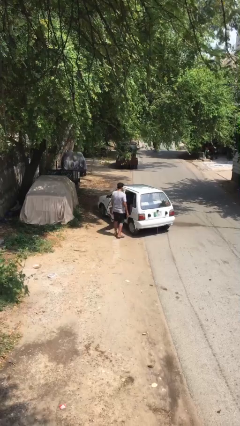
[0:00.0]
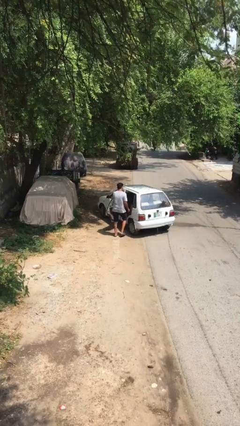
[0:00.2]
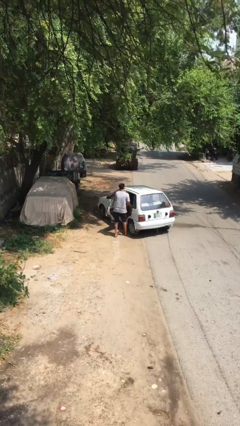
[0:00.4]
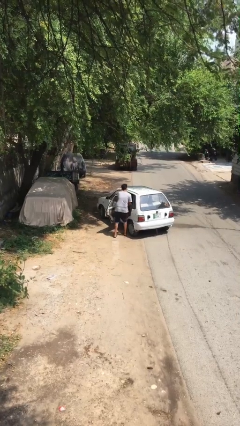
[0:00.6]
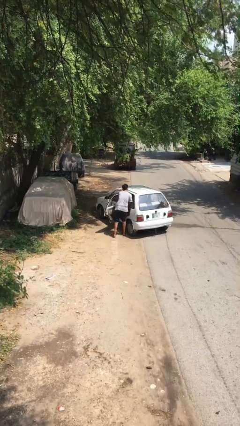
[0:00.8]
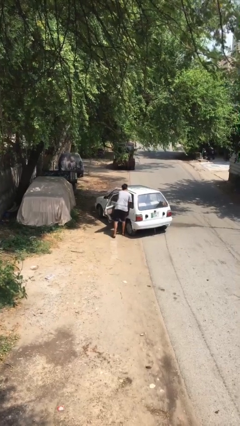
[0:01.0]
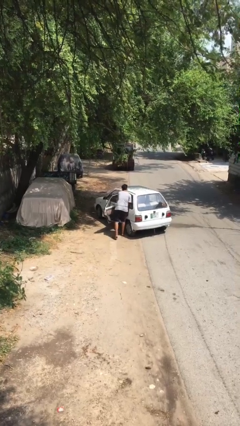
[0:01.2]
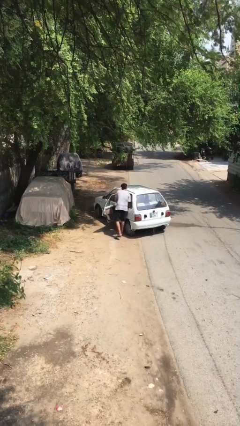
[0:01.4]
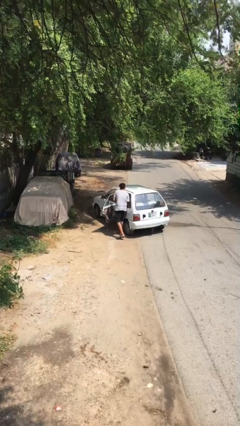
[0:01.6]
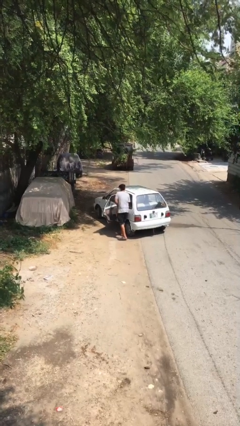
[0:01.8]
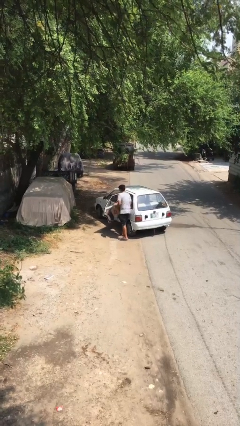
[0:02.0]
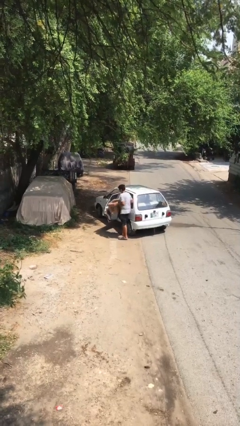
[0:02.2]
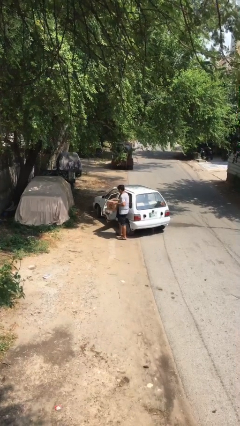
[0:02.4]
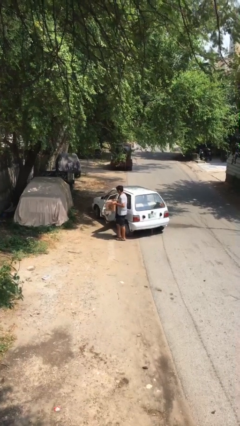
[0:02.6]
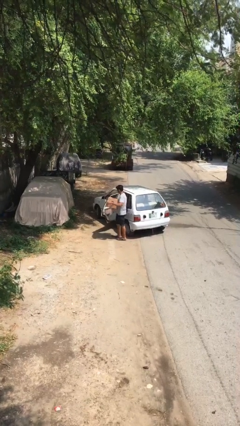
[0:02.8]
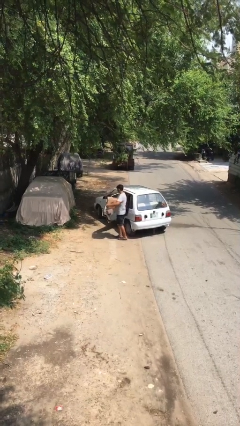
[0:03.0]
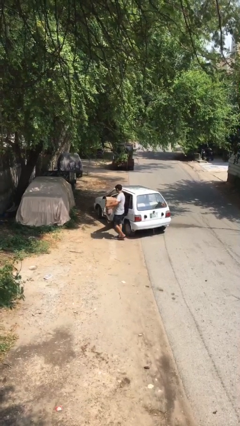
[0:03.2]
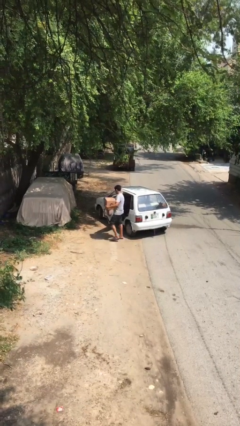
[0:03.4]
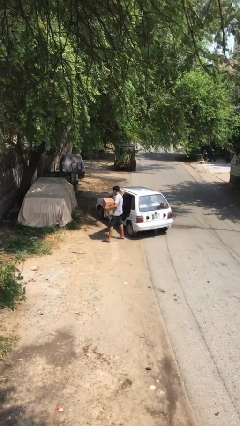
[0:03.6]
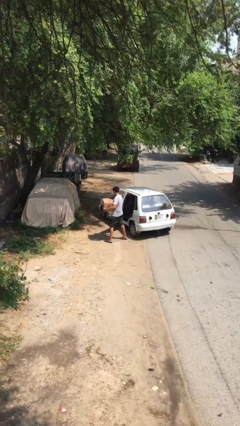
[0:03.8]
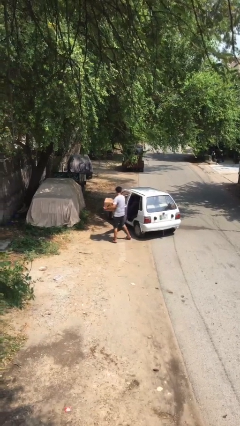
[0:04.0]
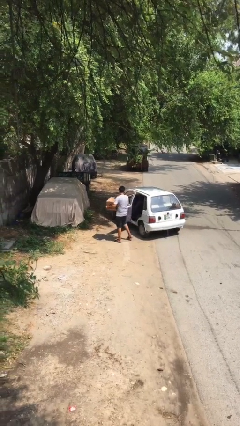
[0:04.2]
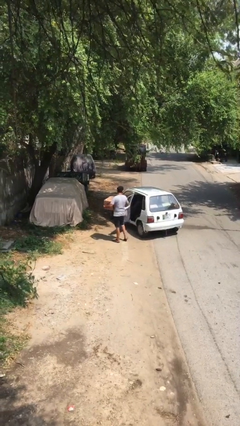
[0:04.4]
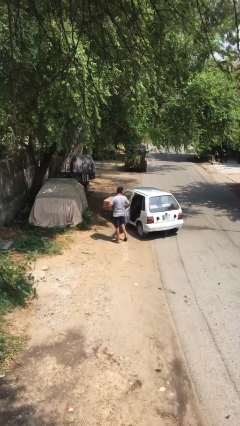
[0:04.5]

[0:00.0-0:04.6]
person unloads car

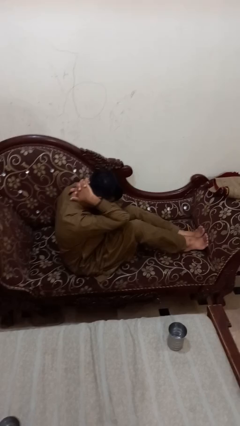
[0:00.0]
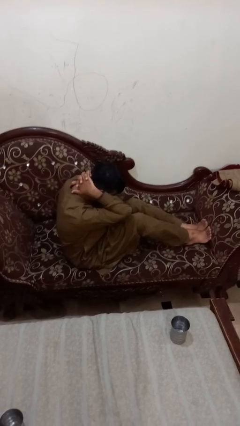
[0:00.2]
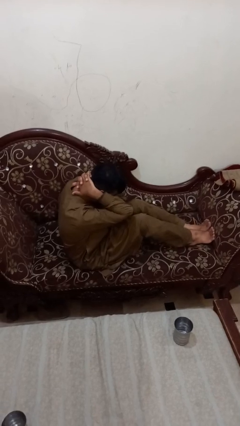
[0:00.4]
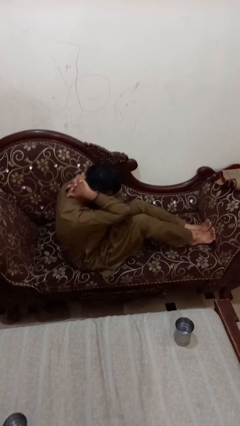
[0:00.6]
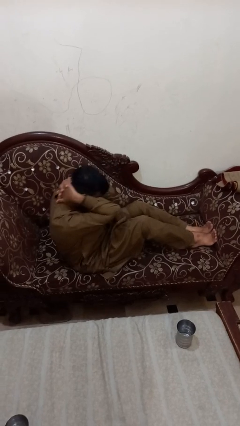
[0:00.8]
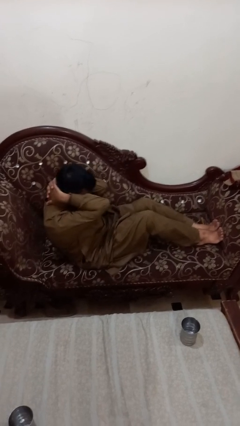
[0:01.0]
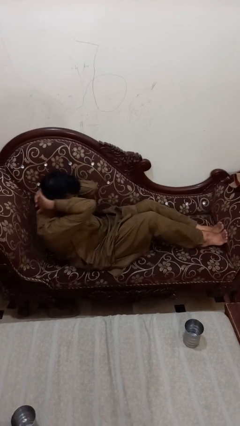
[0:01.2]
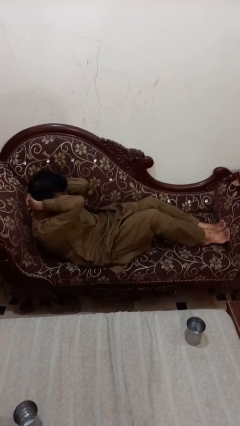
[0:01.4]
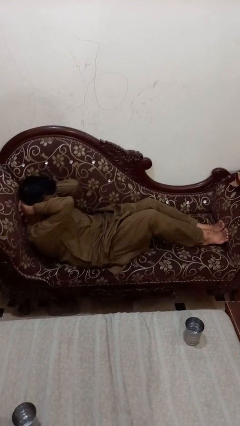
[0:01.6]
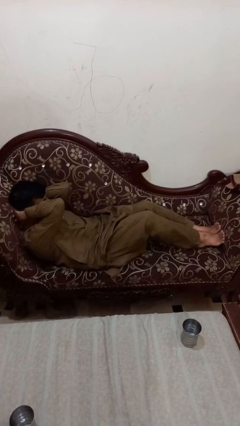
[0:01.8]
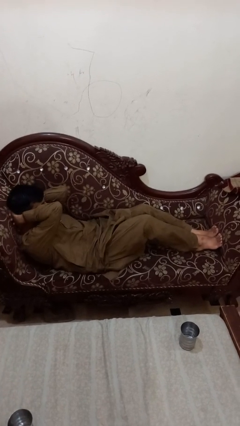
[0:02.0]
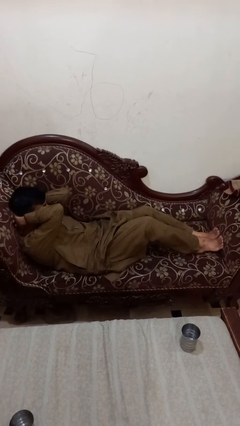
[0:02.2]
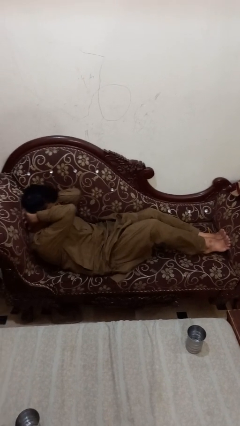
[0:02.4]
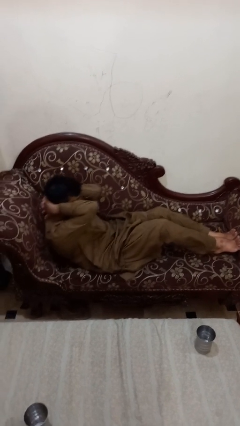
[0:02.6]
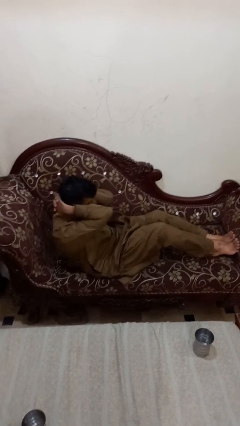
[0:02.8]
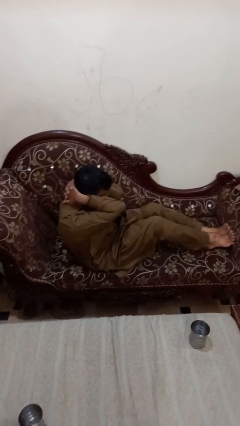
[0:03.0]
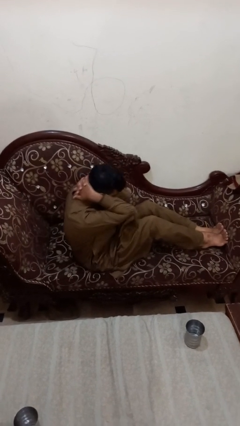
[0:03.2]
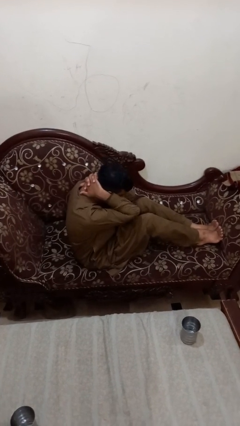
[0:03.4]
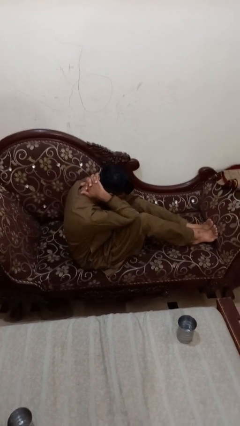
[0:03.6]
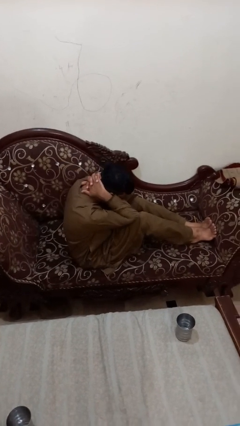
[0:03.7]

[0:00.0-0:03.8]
person exercises with situp

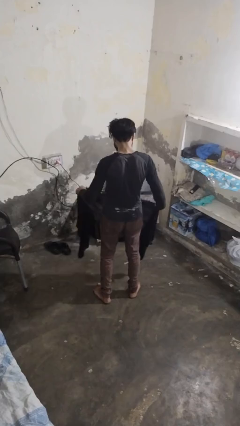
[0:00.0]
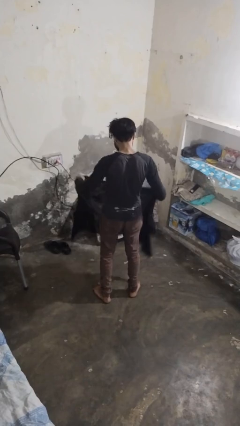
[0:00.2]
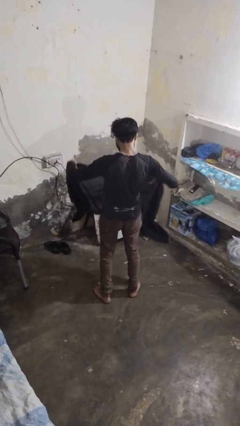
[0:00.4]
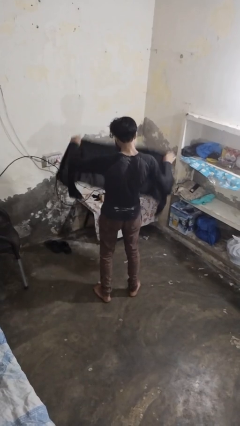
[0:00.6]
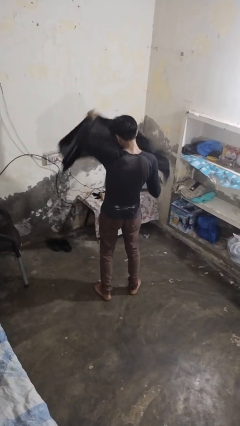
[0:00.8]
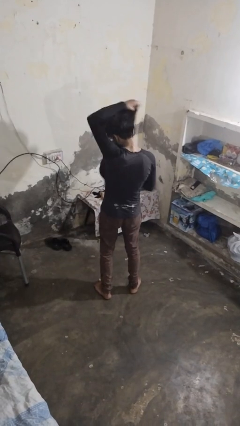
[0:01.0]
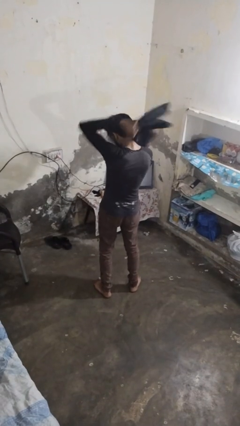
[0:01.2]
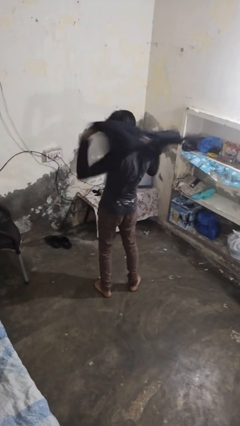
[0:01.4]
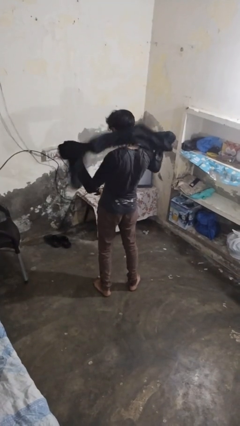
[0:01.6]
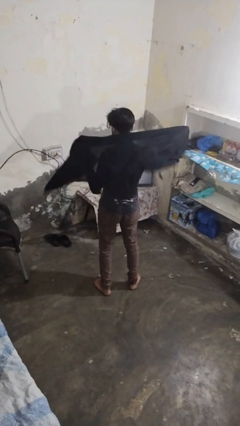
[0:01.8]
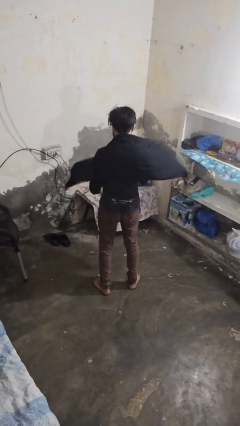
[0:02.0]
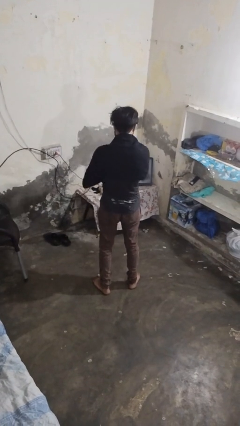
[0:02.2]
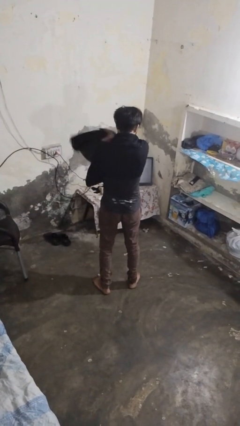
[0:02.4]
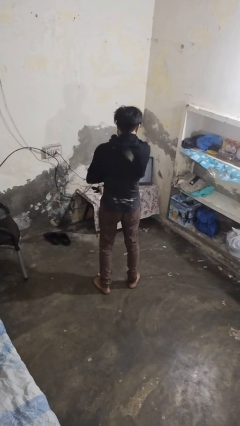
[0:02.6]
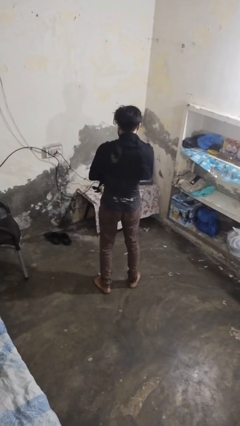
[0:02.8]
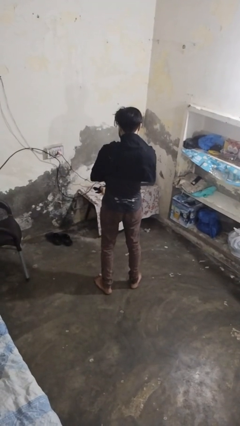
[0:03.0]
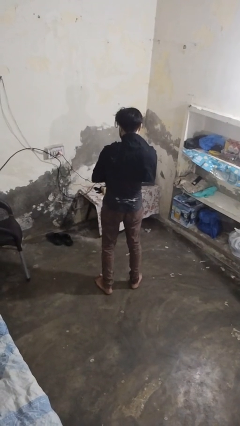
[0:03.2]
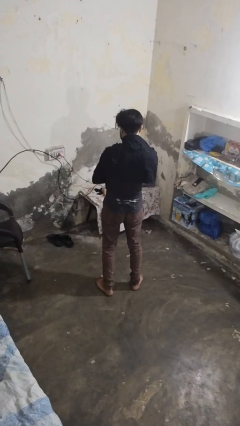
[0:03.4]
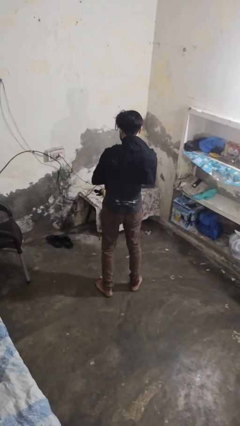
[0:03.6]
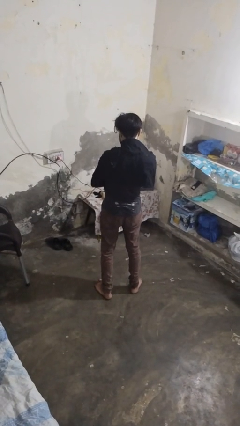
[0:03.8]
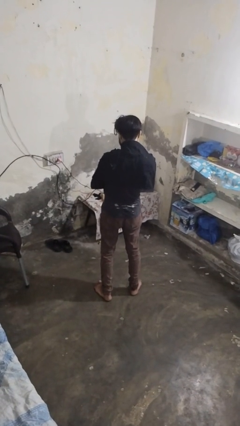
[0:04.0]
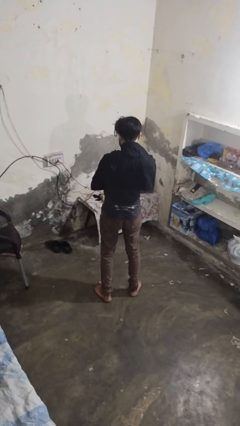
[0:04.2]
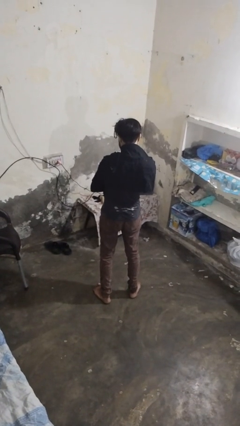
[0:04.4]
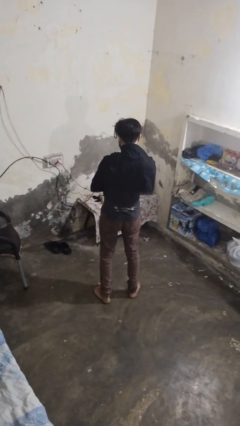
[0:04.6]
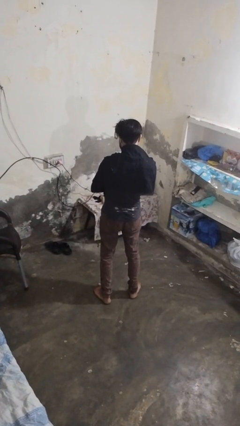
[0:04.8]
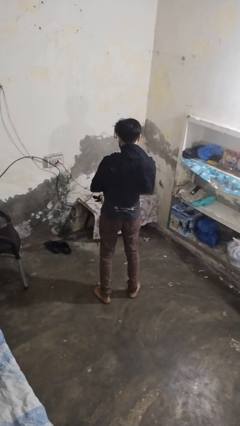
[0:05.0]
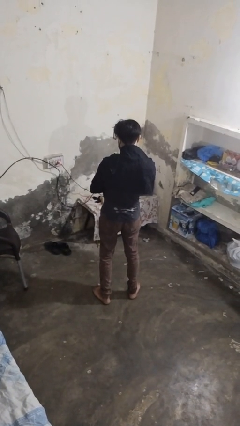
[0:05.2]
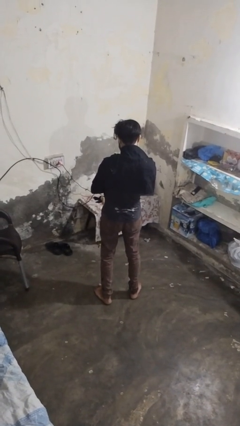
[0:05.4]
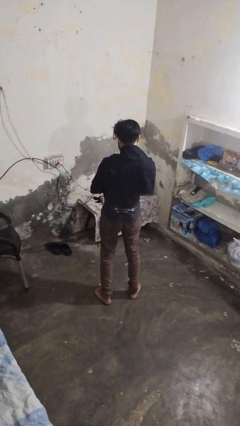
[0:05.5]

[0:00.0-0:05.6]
person puts on scarf

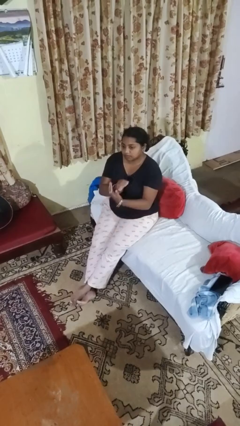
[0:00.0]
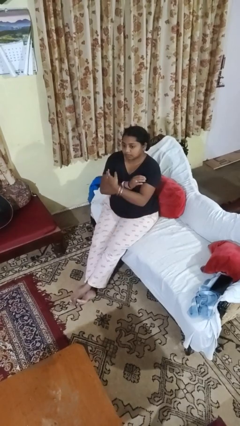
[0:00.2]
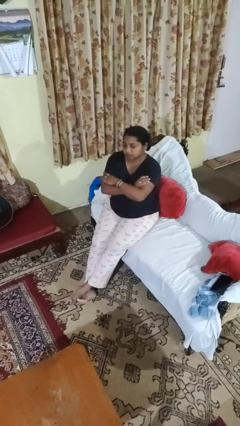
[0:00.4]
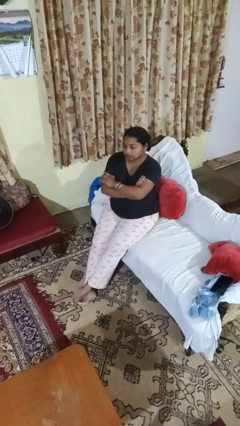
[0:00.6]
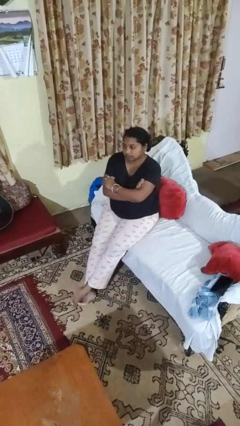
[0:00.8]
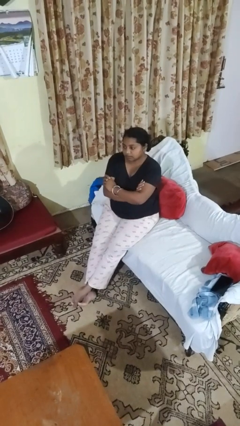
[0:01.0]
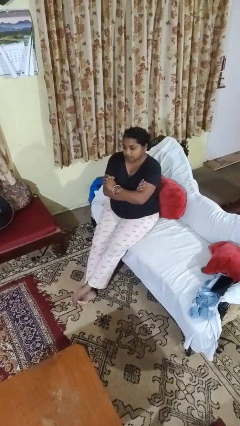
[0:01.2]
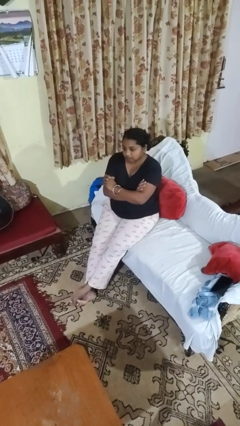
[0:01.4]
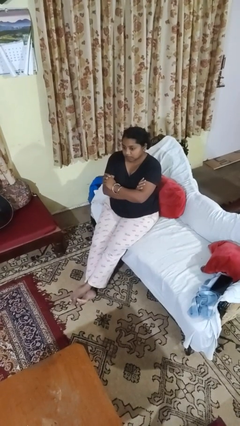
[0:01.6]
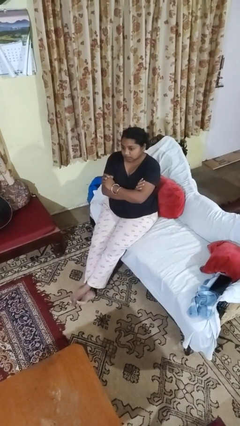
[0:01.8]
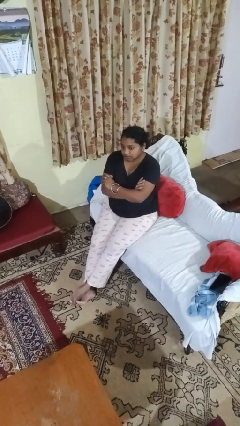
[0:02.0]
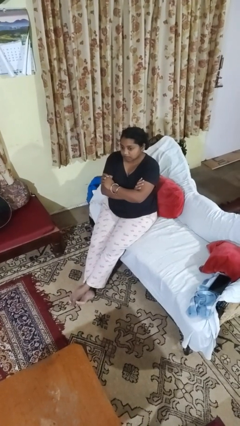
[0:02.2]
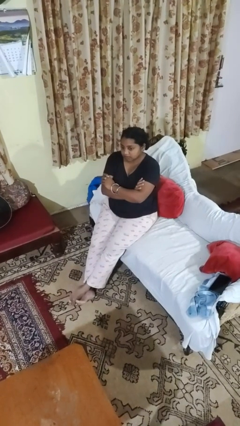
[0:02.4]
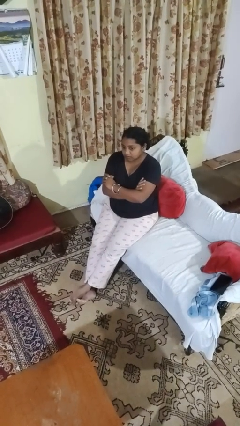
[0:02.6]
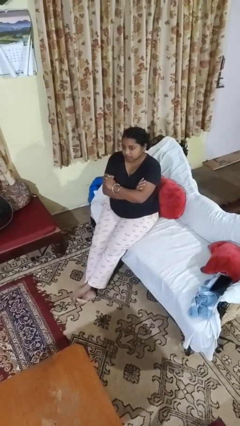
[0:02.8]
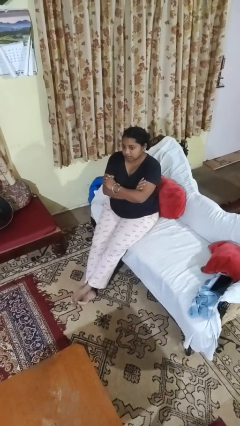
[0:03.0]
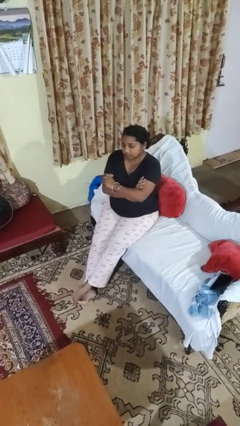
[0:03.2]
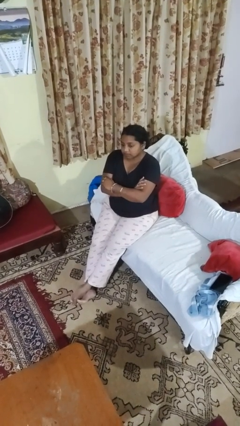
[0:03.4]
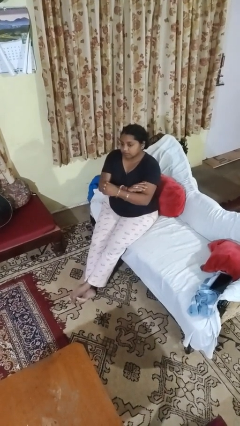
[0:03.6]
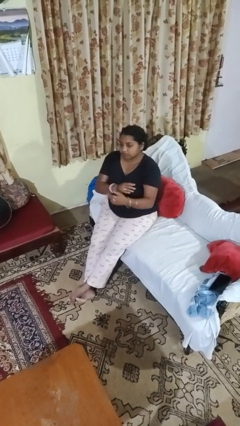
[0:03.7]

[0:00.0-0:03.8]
person crosses arms
